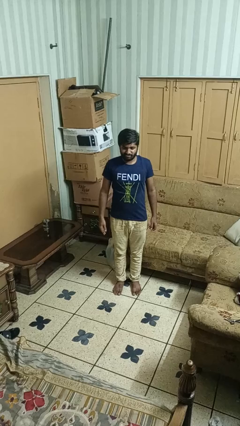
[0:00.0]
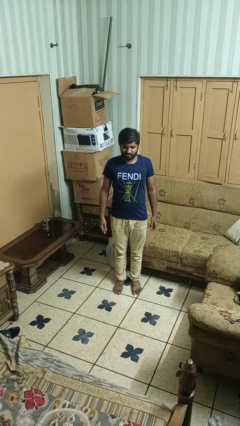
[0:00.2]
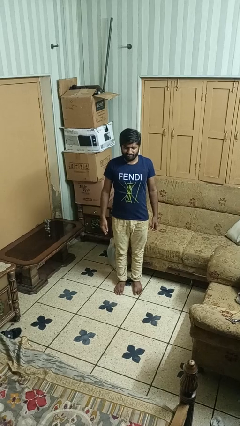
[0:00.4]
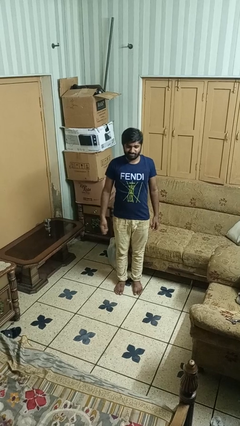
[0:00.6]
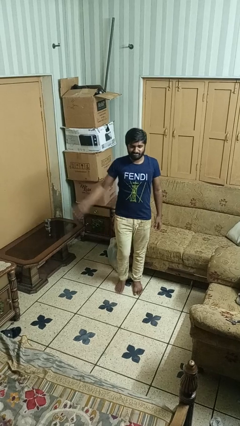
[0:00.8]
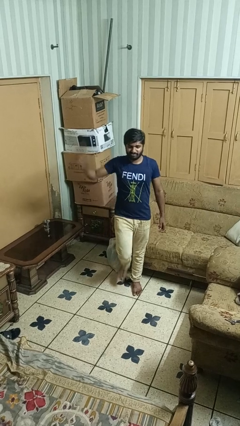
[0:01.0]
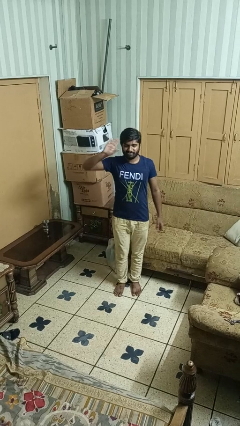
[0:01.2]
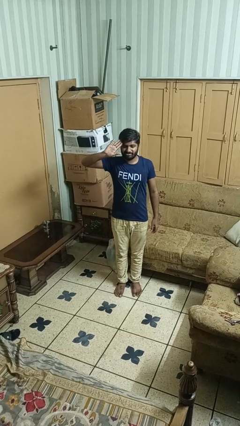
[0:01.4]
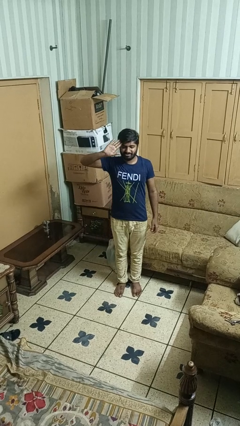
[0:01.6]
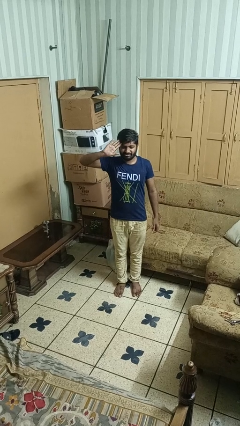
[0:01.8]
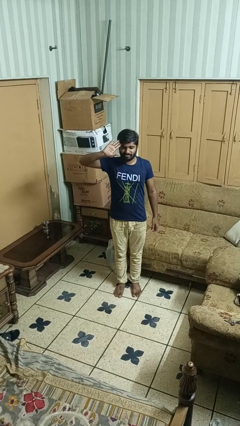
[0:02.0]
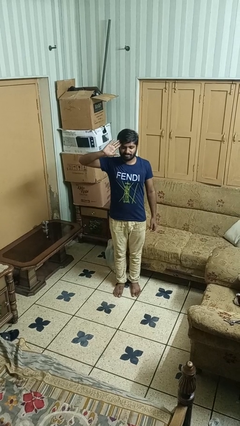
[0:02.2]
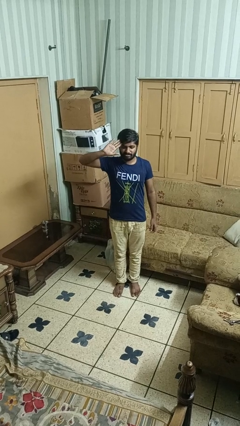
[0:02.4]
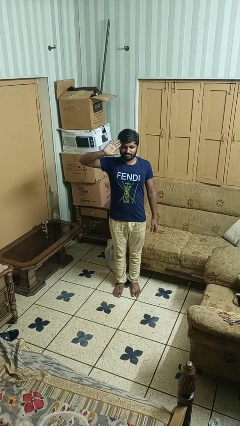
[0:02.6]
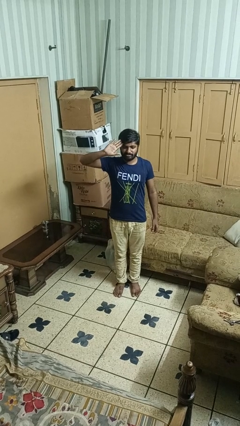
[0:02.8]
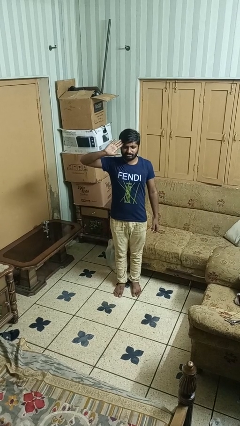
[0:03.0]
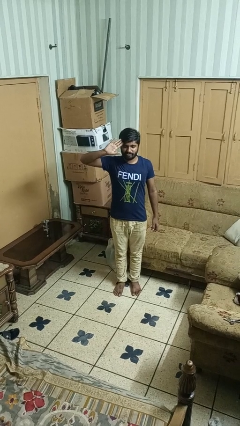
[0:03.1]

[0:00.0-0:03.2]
person salutes

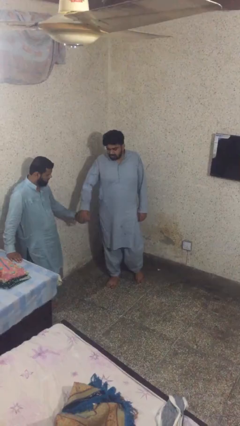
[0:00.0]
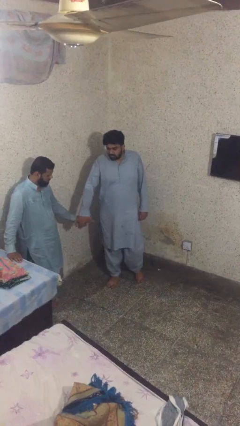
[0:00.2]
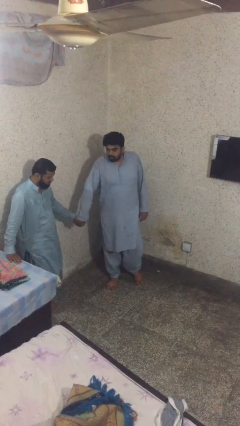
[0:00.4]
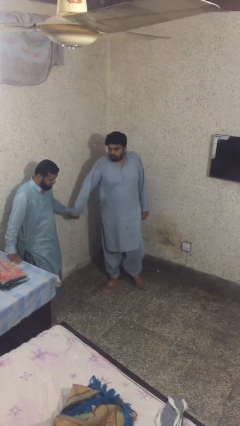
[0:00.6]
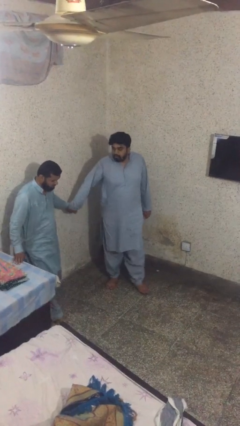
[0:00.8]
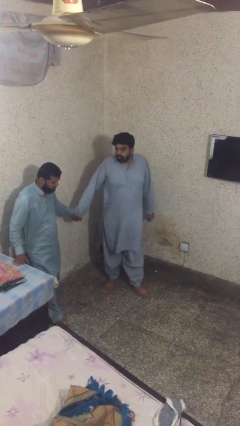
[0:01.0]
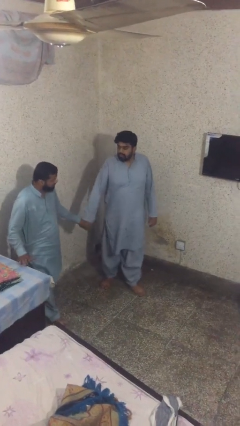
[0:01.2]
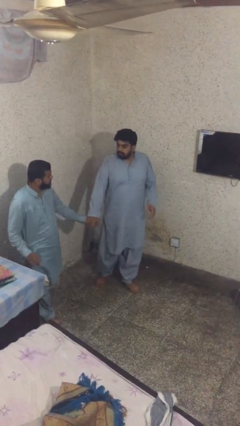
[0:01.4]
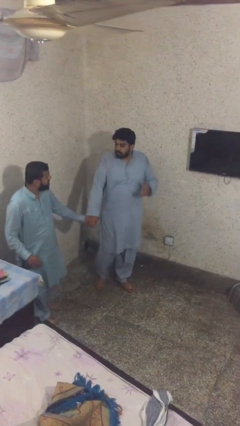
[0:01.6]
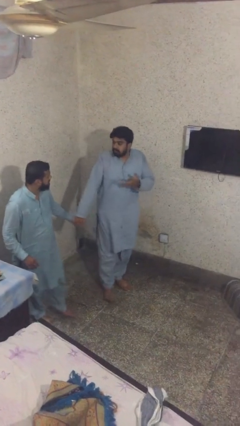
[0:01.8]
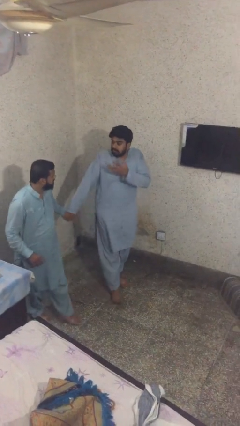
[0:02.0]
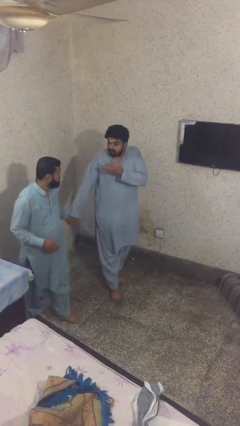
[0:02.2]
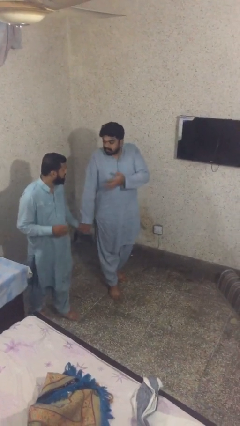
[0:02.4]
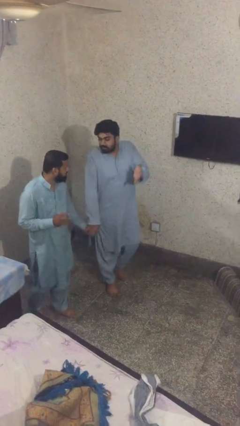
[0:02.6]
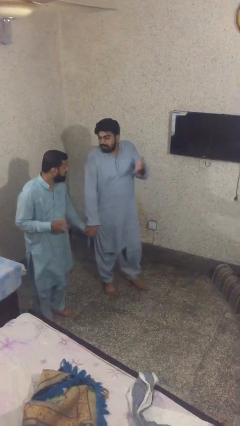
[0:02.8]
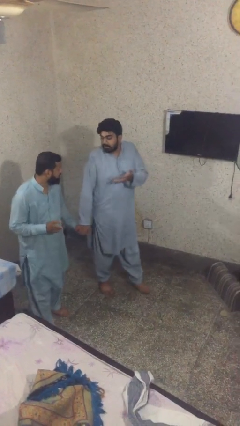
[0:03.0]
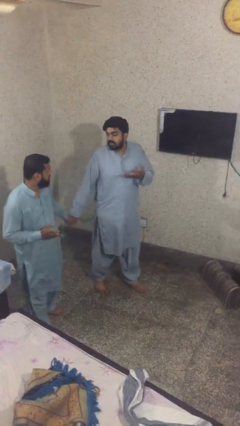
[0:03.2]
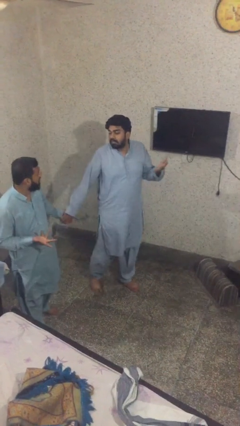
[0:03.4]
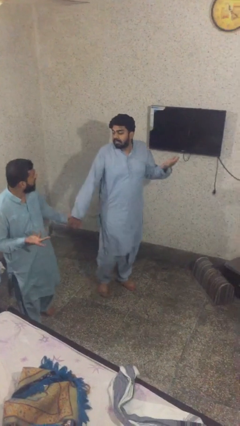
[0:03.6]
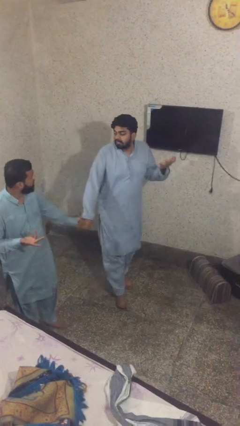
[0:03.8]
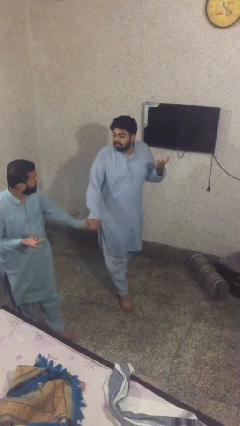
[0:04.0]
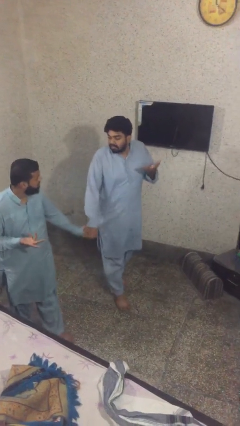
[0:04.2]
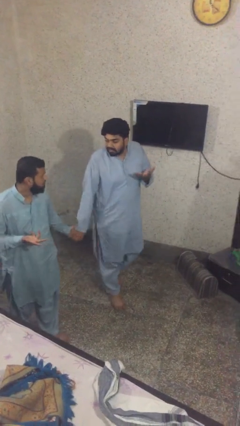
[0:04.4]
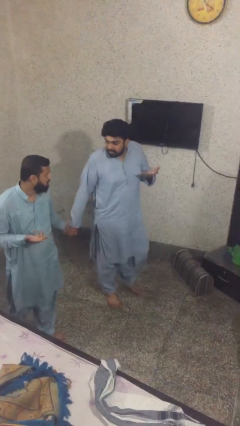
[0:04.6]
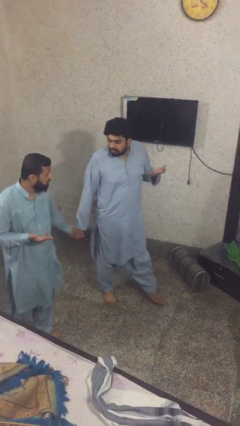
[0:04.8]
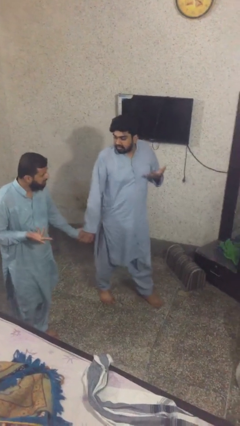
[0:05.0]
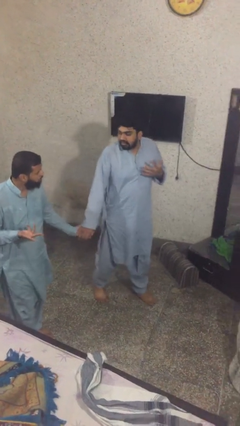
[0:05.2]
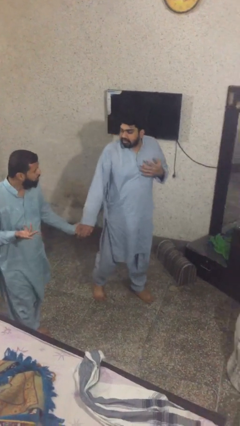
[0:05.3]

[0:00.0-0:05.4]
person holds hand

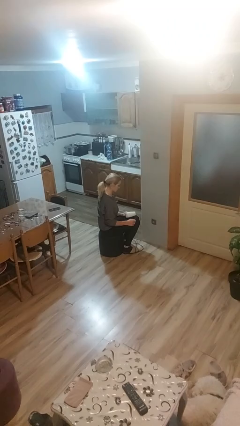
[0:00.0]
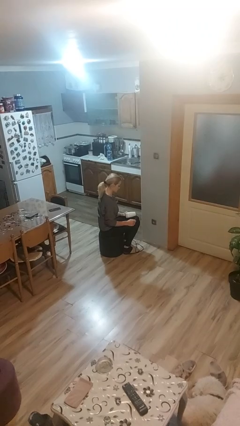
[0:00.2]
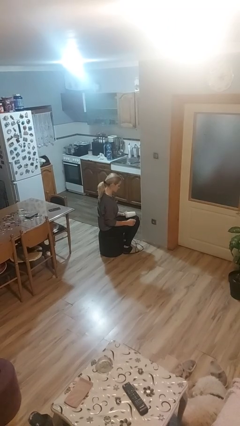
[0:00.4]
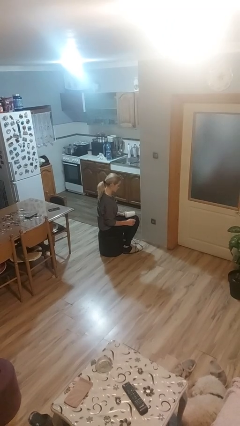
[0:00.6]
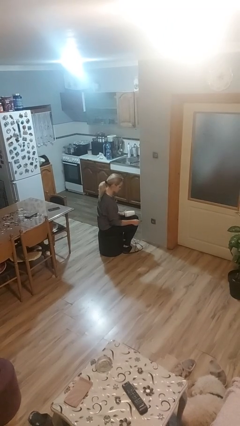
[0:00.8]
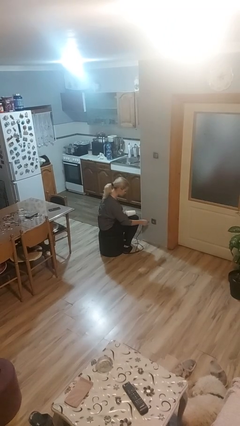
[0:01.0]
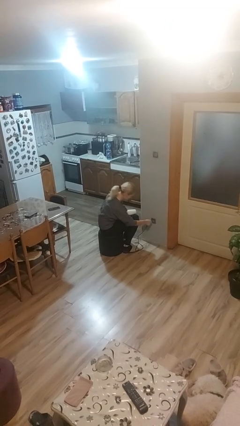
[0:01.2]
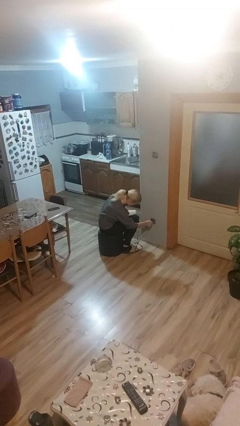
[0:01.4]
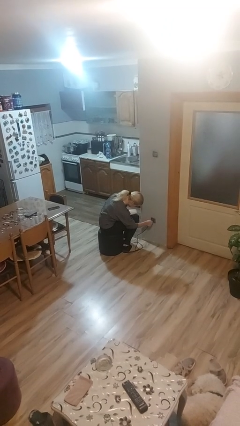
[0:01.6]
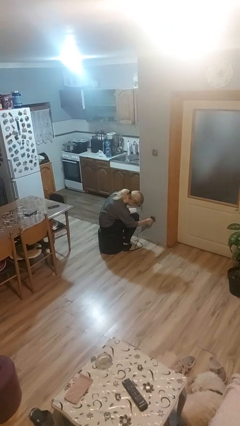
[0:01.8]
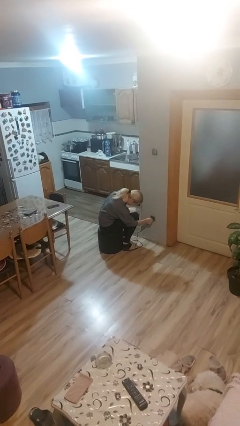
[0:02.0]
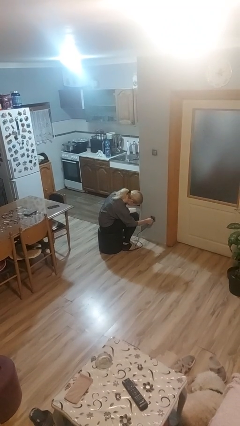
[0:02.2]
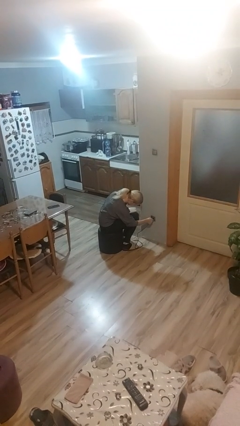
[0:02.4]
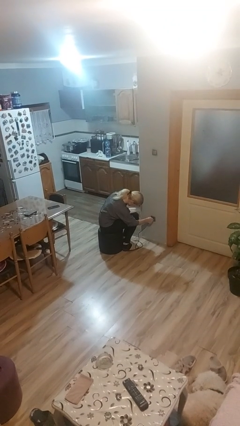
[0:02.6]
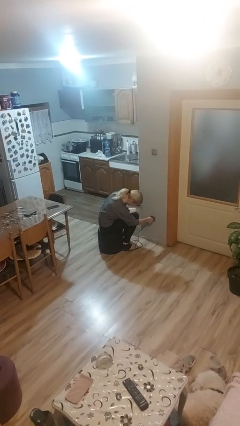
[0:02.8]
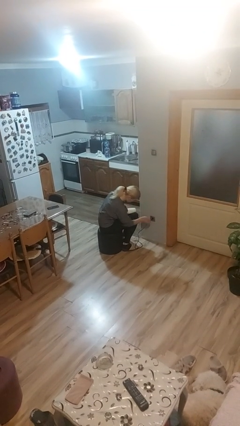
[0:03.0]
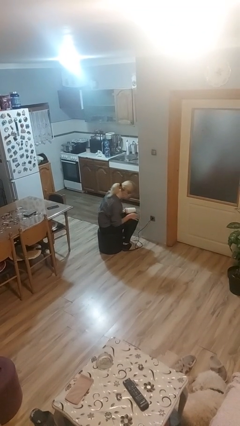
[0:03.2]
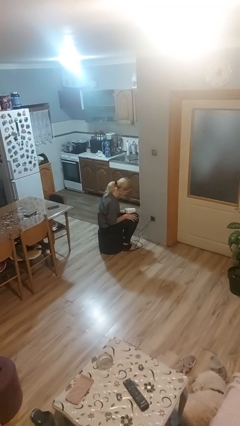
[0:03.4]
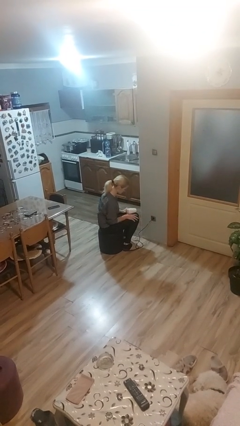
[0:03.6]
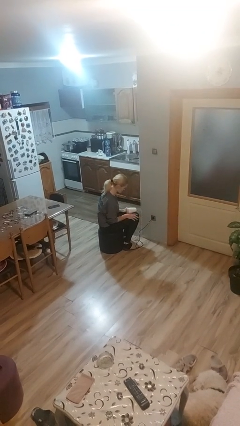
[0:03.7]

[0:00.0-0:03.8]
person plugs into electrical socket

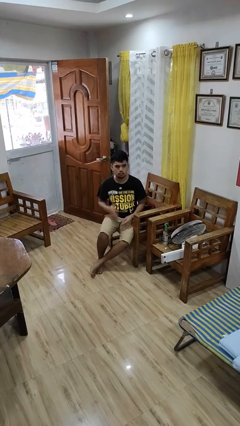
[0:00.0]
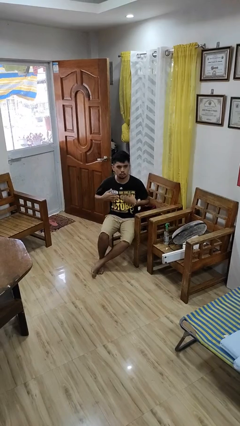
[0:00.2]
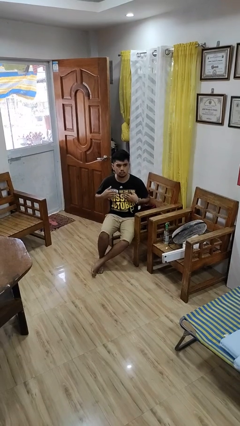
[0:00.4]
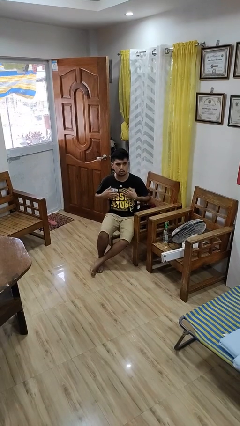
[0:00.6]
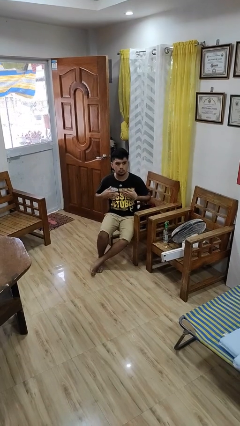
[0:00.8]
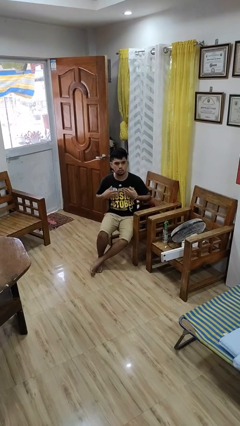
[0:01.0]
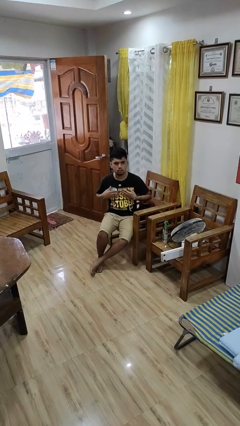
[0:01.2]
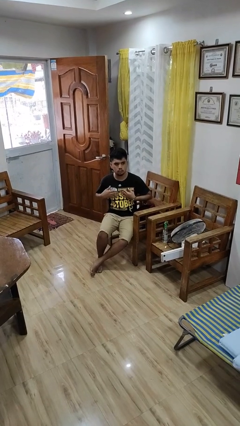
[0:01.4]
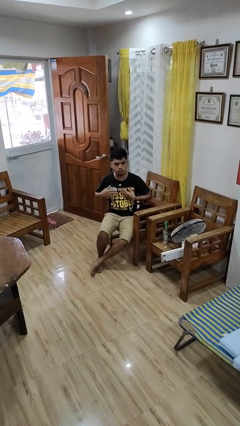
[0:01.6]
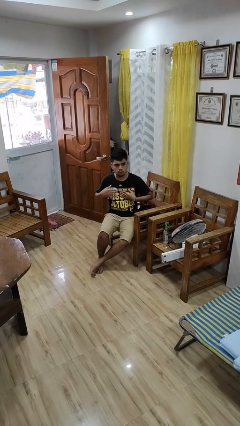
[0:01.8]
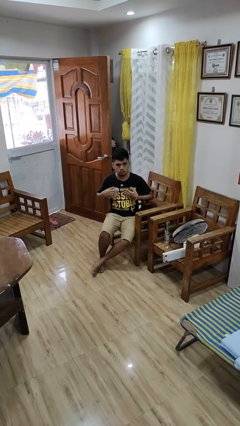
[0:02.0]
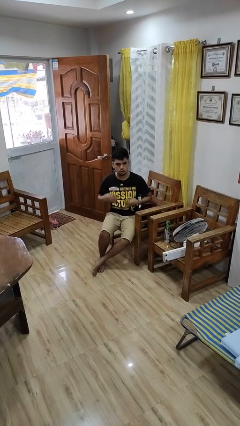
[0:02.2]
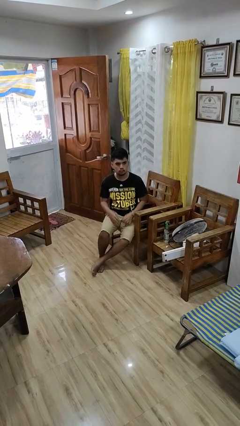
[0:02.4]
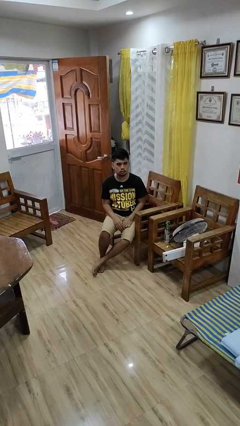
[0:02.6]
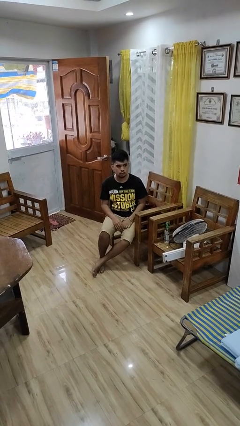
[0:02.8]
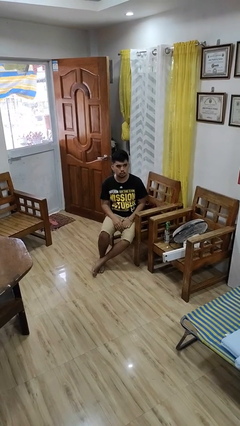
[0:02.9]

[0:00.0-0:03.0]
person drums on chest

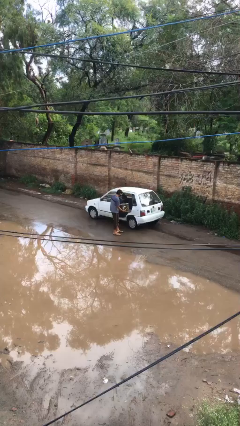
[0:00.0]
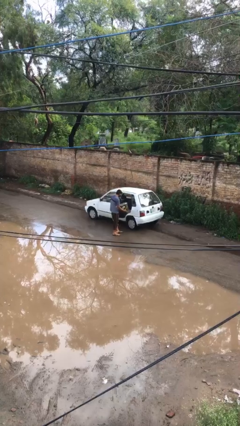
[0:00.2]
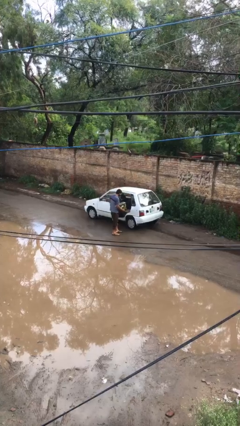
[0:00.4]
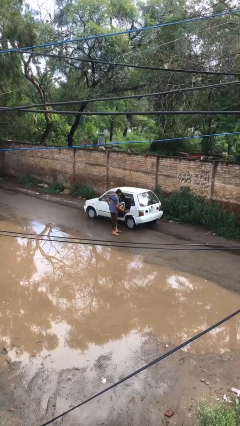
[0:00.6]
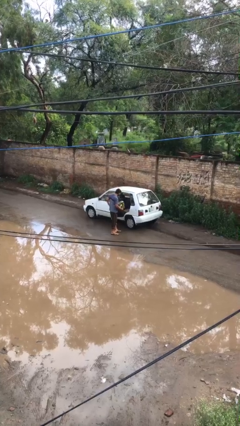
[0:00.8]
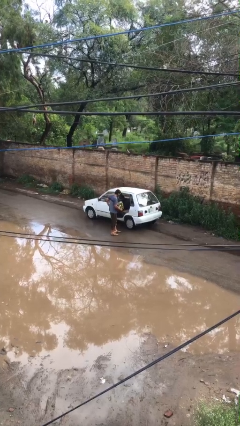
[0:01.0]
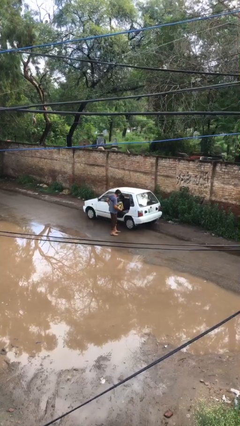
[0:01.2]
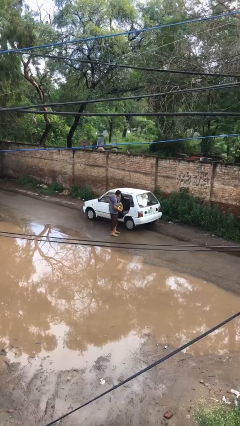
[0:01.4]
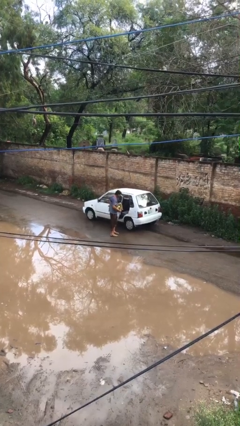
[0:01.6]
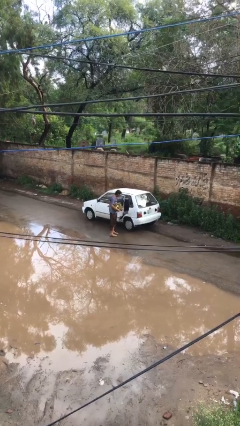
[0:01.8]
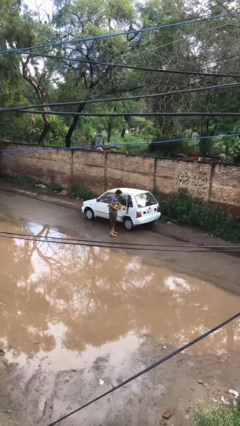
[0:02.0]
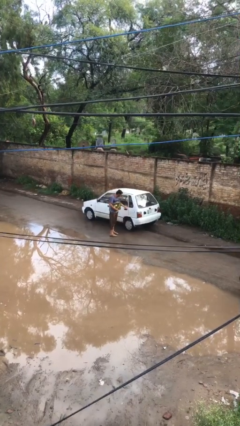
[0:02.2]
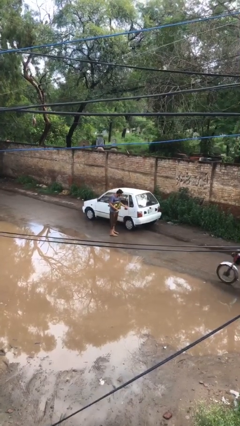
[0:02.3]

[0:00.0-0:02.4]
person closes car door
